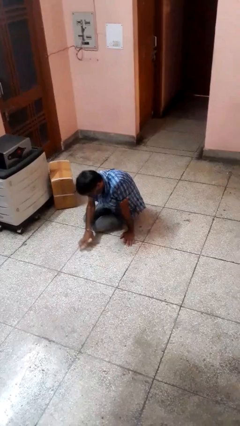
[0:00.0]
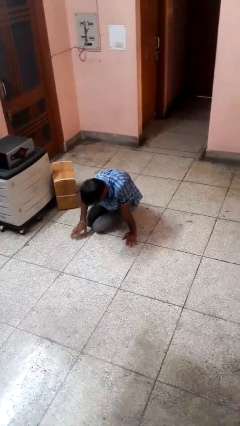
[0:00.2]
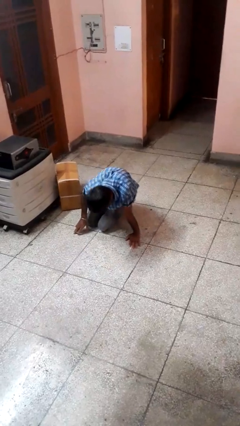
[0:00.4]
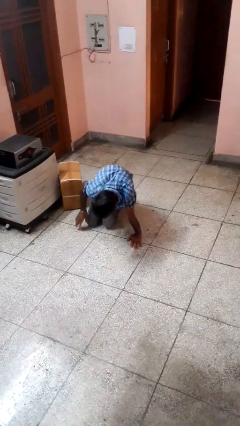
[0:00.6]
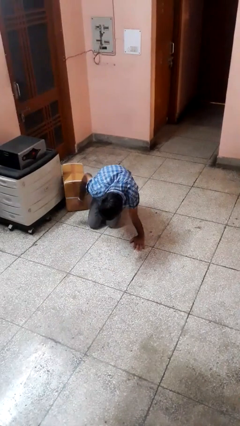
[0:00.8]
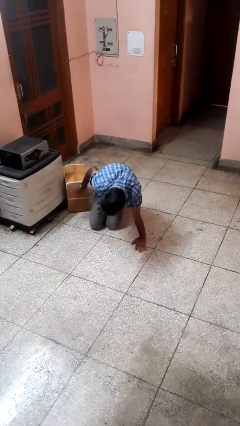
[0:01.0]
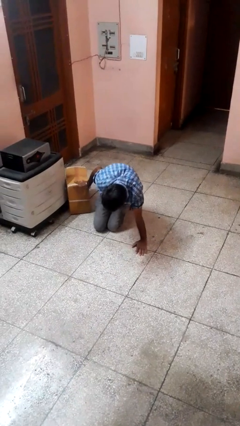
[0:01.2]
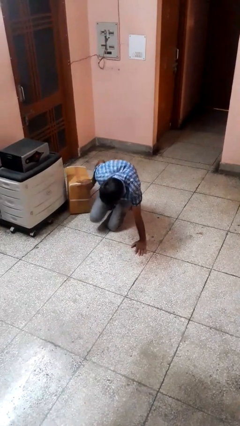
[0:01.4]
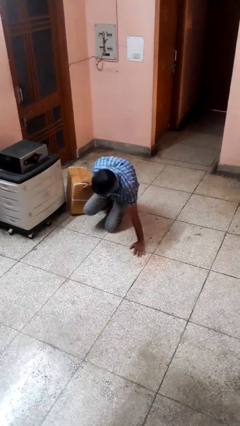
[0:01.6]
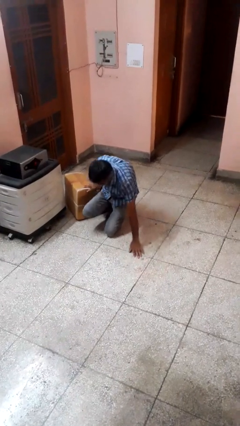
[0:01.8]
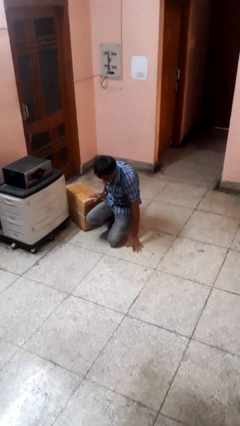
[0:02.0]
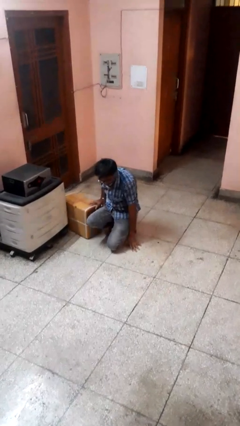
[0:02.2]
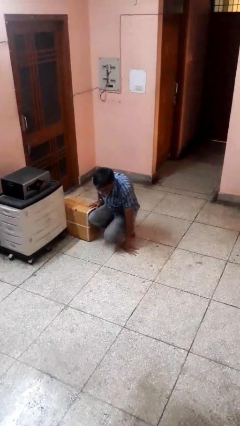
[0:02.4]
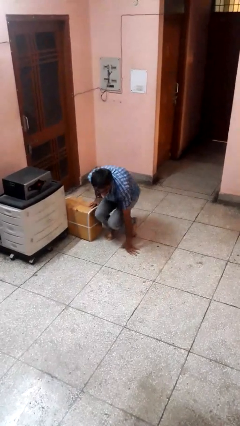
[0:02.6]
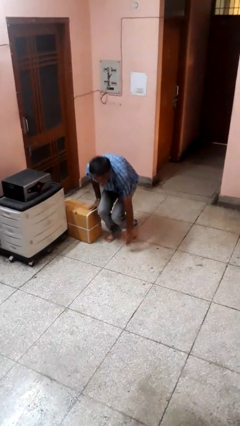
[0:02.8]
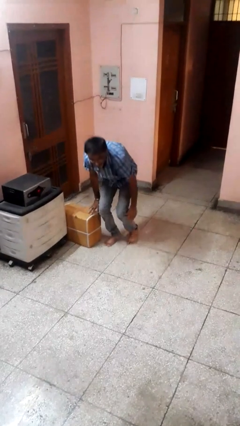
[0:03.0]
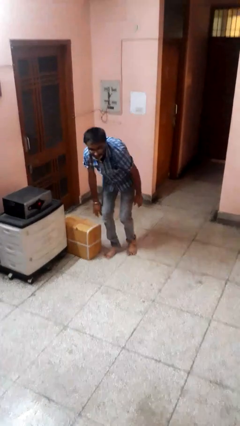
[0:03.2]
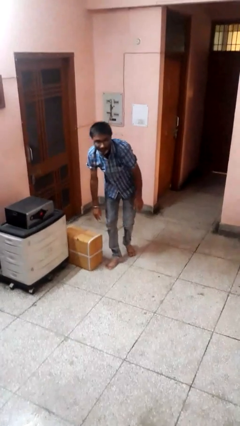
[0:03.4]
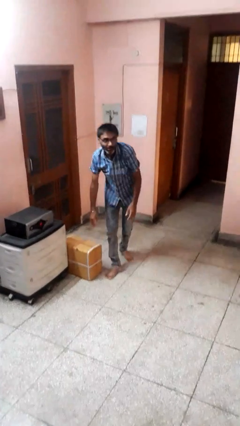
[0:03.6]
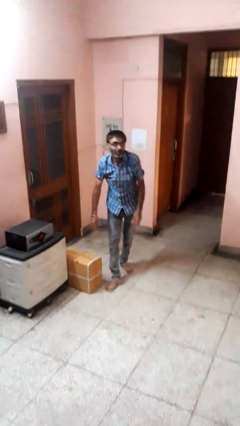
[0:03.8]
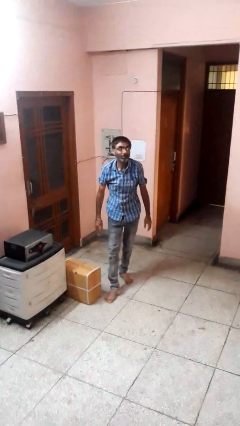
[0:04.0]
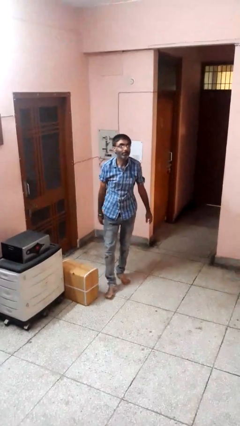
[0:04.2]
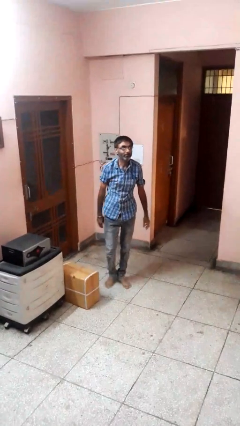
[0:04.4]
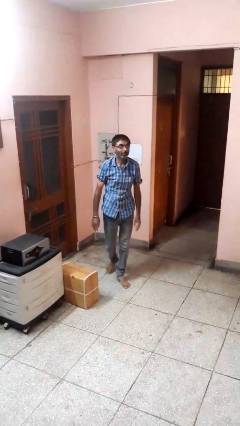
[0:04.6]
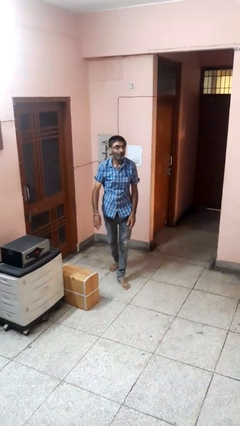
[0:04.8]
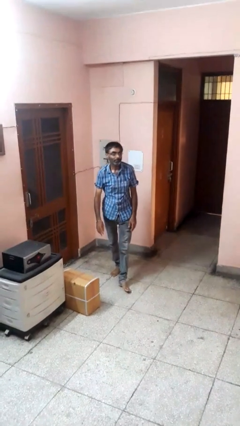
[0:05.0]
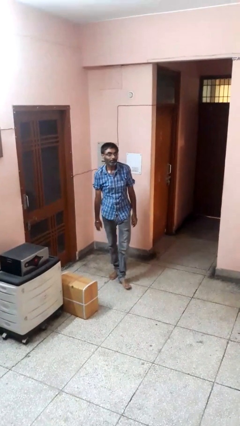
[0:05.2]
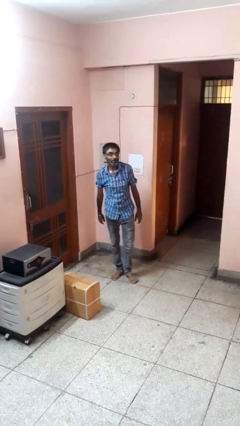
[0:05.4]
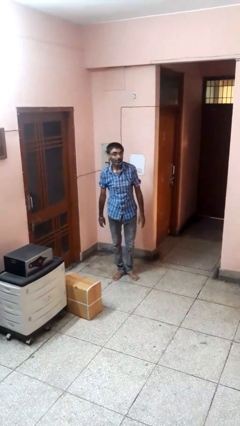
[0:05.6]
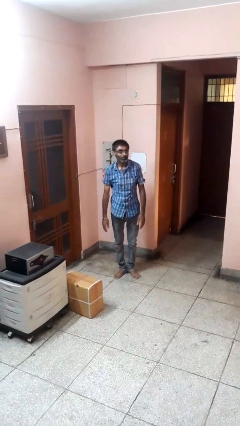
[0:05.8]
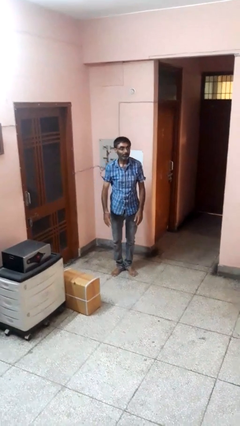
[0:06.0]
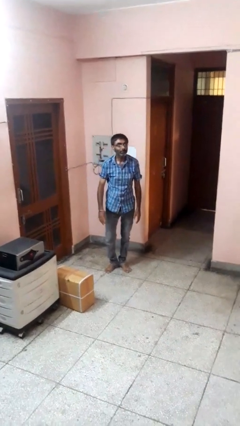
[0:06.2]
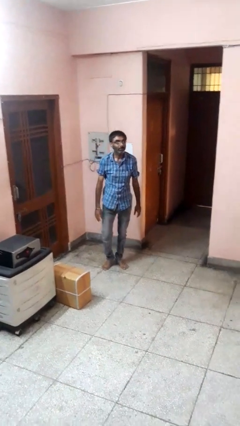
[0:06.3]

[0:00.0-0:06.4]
person stands up from floor

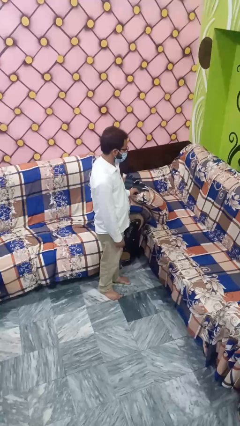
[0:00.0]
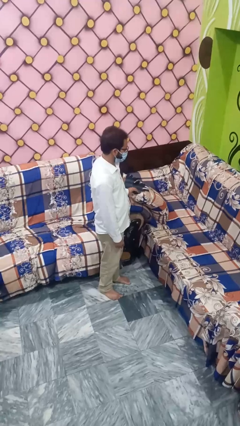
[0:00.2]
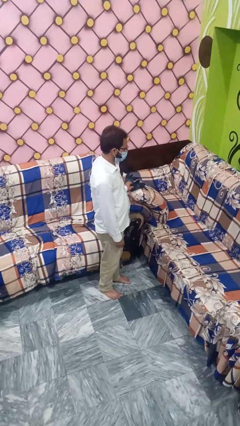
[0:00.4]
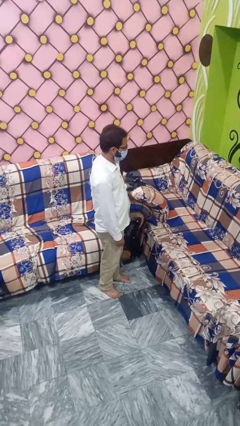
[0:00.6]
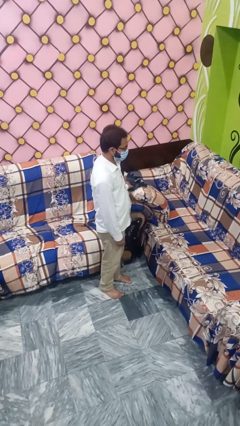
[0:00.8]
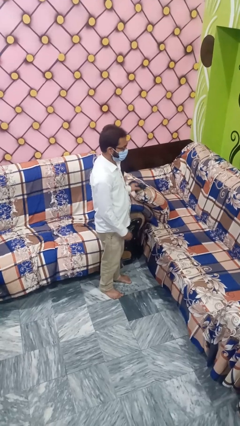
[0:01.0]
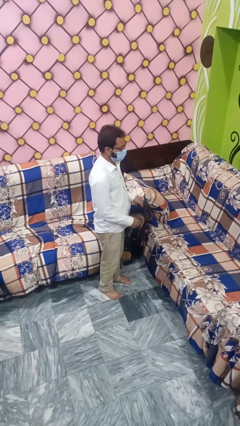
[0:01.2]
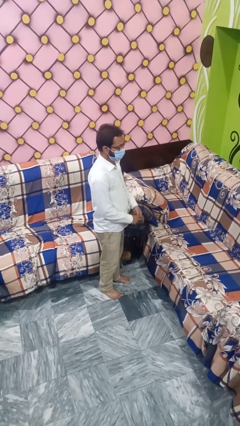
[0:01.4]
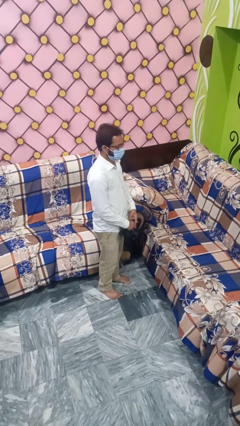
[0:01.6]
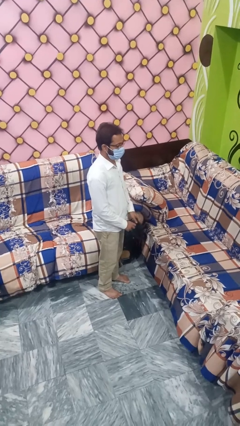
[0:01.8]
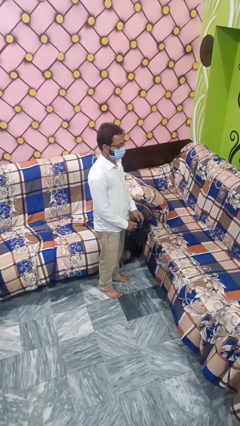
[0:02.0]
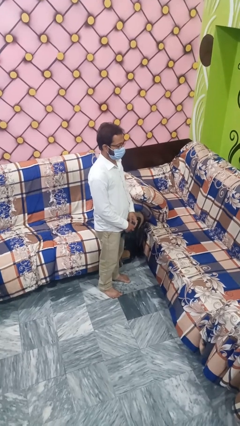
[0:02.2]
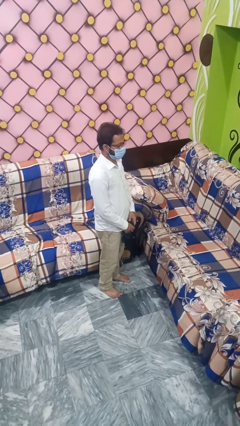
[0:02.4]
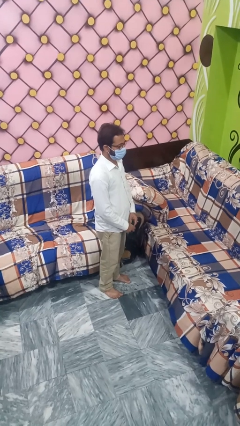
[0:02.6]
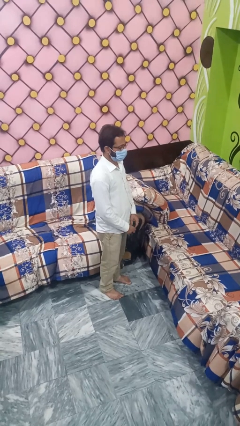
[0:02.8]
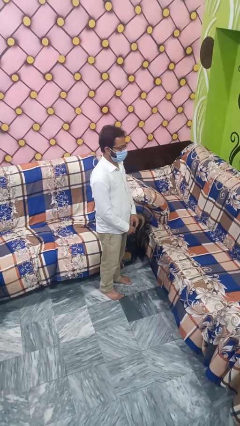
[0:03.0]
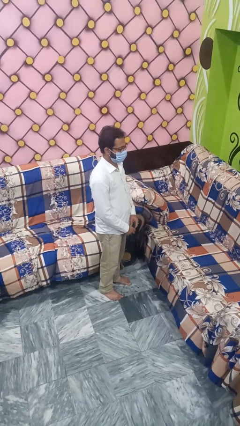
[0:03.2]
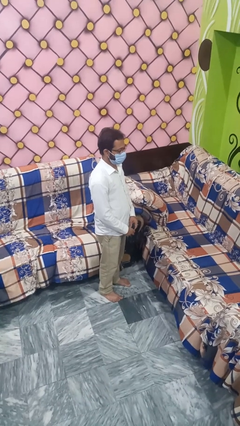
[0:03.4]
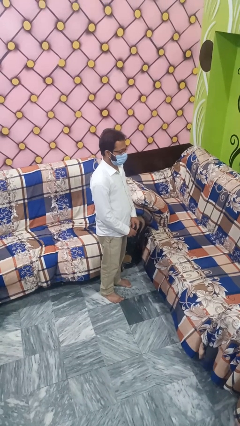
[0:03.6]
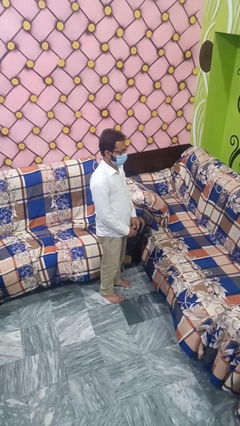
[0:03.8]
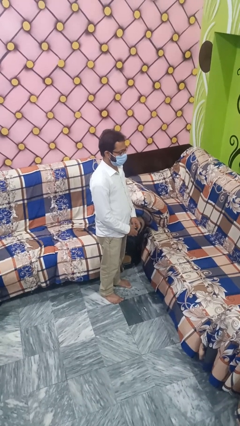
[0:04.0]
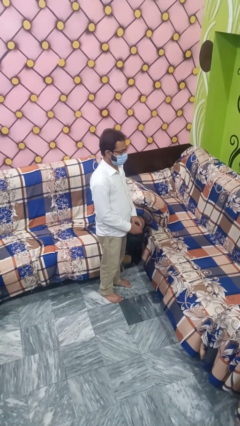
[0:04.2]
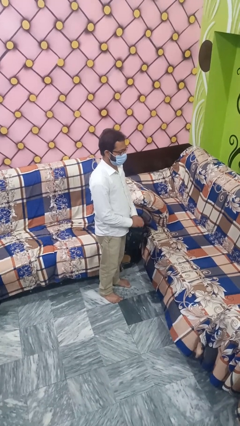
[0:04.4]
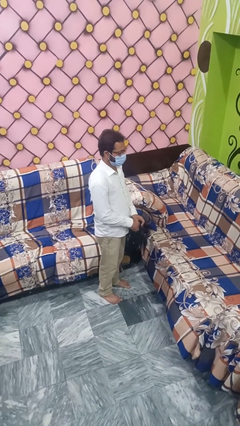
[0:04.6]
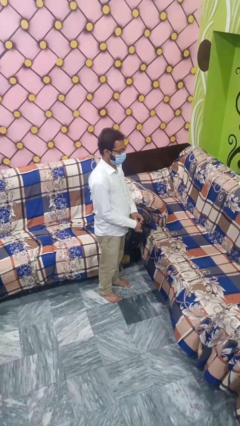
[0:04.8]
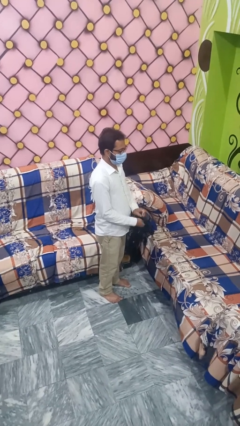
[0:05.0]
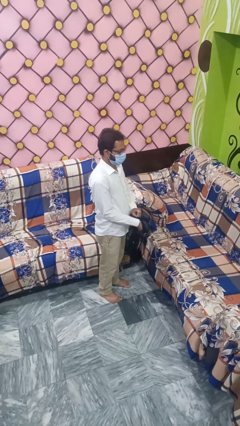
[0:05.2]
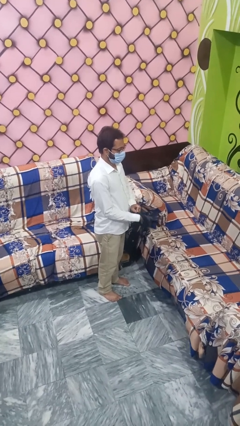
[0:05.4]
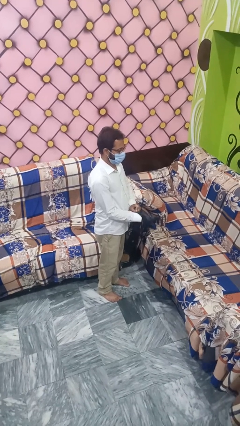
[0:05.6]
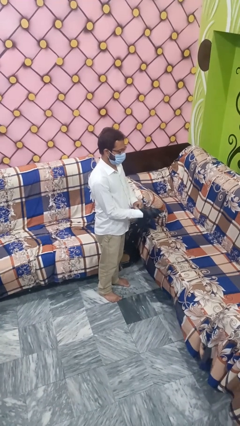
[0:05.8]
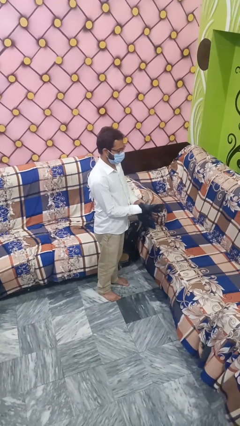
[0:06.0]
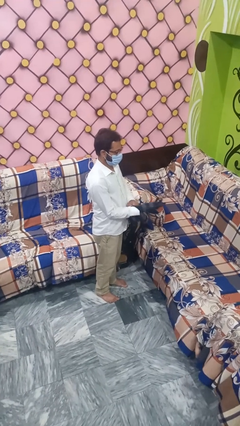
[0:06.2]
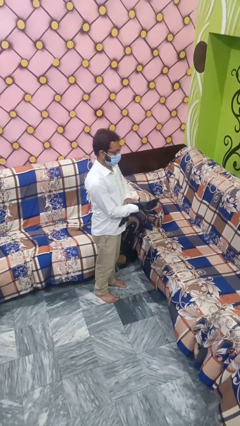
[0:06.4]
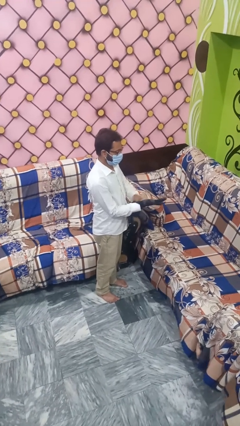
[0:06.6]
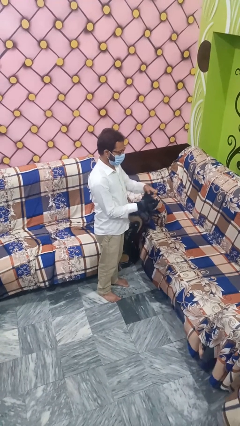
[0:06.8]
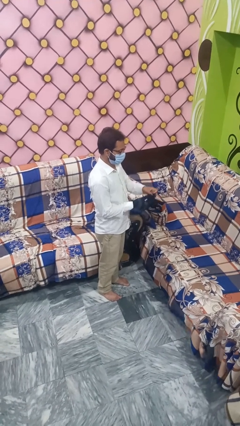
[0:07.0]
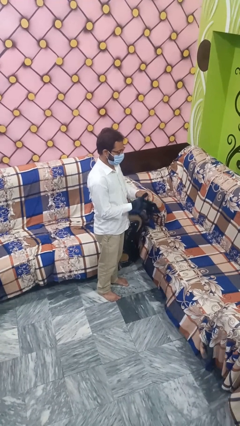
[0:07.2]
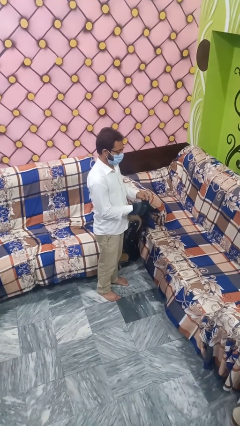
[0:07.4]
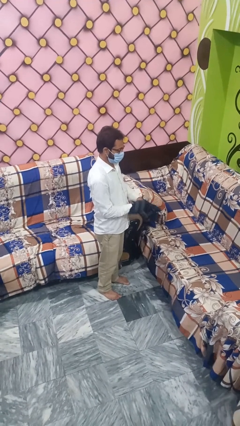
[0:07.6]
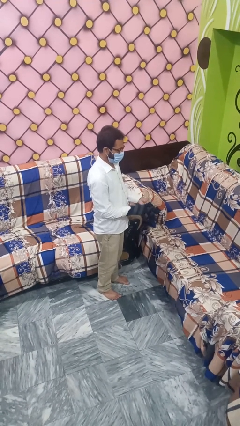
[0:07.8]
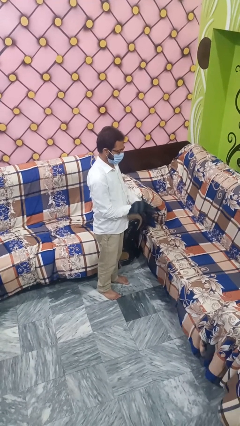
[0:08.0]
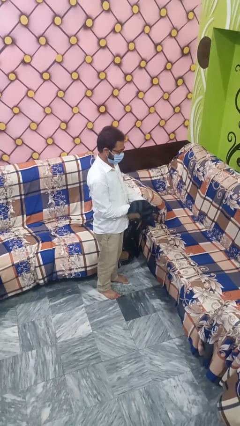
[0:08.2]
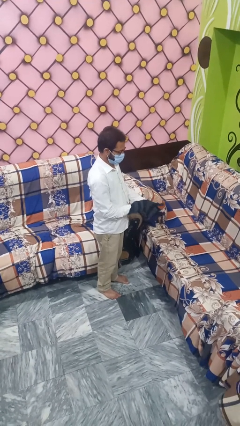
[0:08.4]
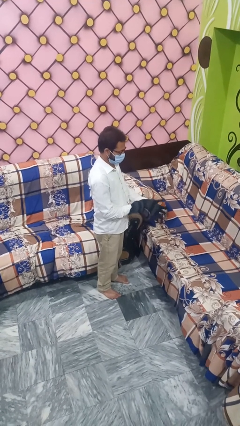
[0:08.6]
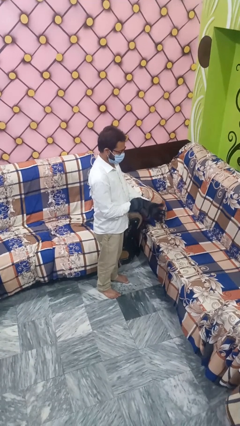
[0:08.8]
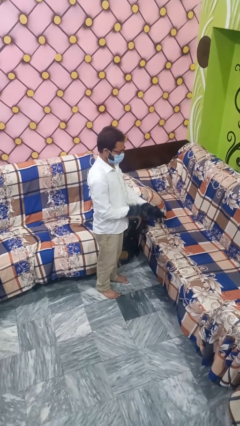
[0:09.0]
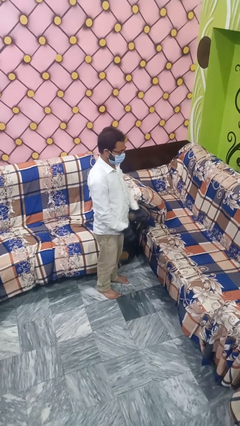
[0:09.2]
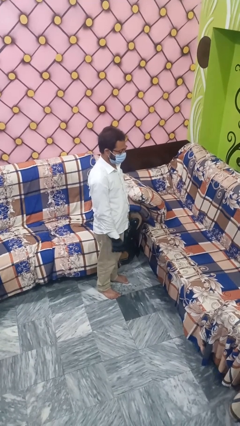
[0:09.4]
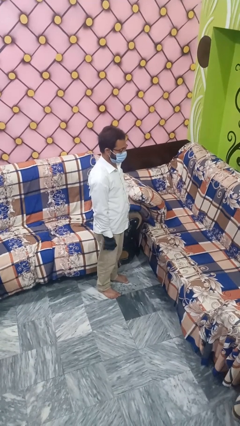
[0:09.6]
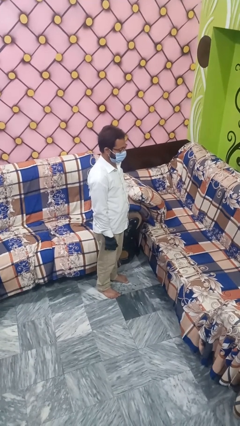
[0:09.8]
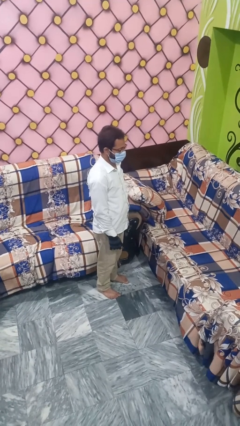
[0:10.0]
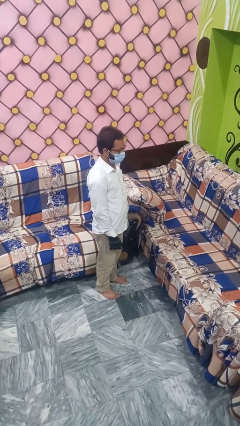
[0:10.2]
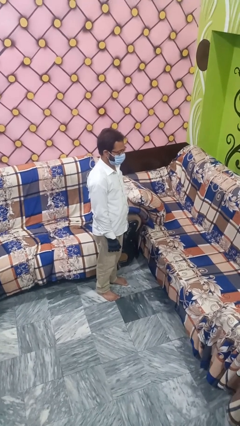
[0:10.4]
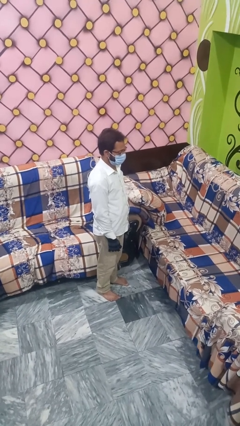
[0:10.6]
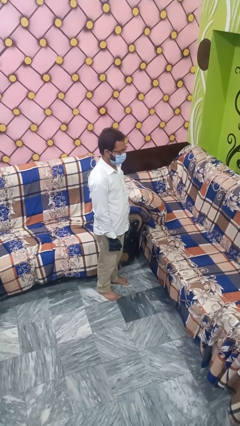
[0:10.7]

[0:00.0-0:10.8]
person puts on gloves

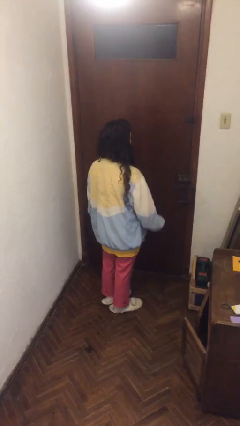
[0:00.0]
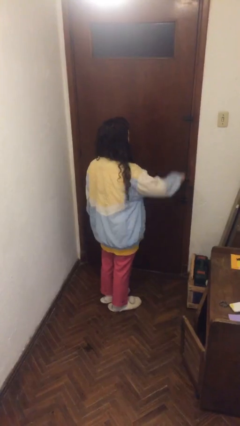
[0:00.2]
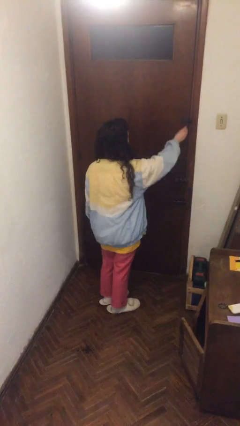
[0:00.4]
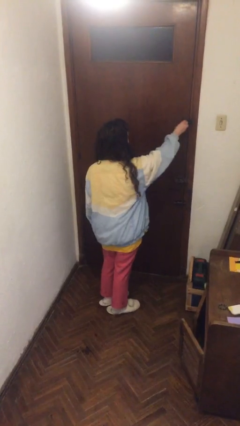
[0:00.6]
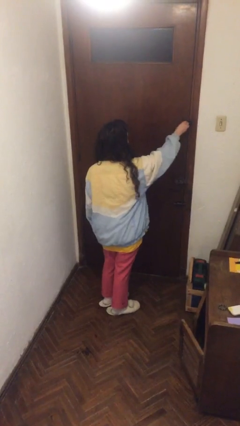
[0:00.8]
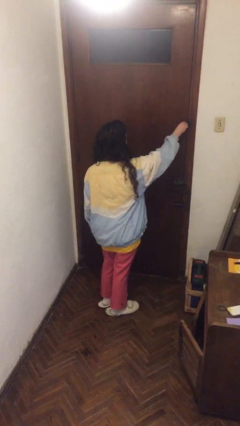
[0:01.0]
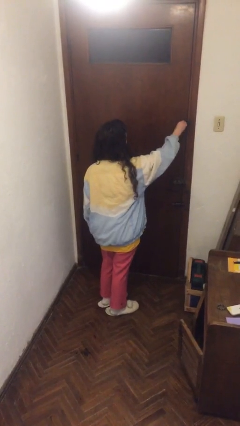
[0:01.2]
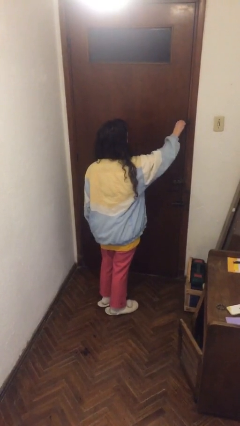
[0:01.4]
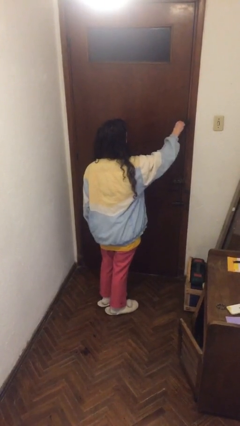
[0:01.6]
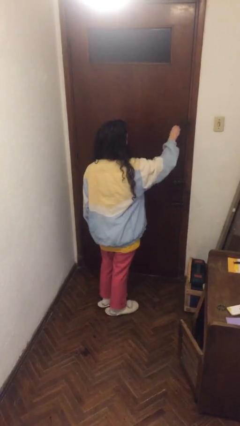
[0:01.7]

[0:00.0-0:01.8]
person unlocks door with keys
